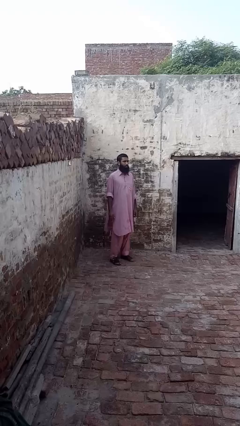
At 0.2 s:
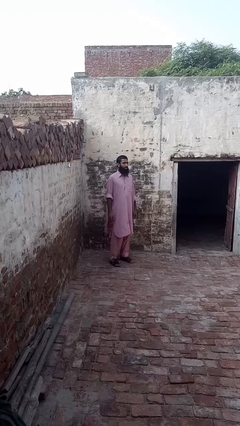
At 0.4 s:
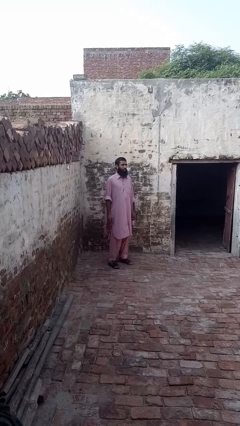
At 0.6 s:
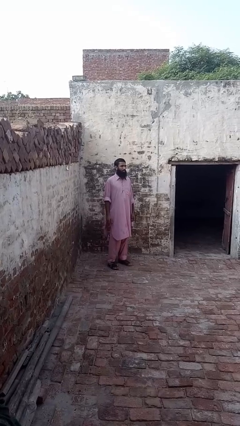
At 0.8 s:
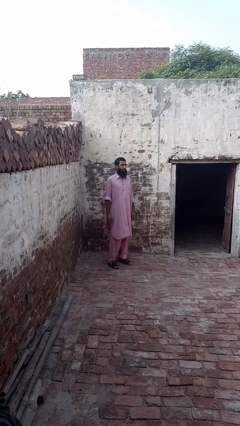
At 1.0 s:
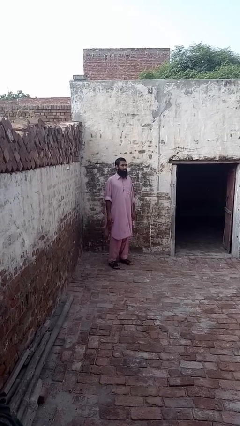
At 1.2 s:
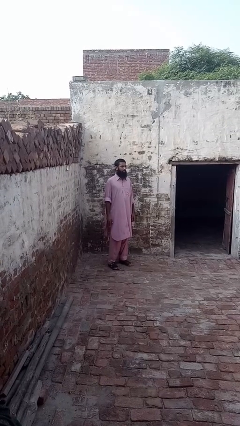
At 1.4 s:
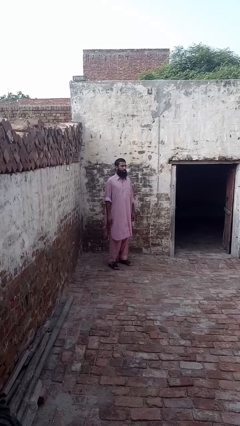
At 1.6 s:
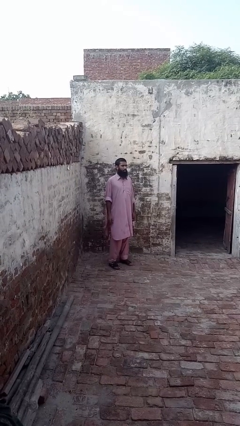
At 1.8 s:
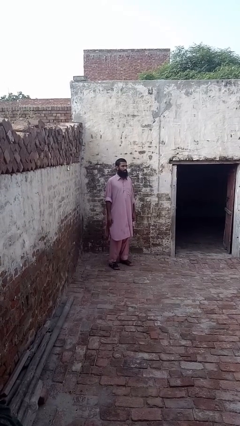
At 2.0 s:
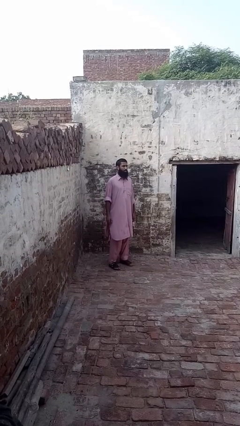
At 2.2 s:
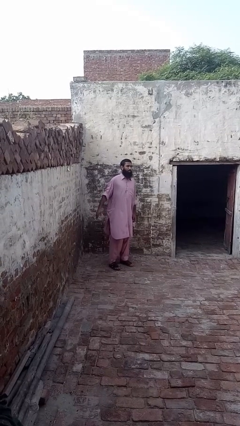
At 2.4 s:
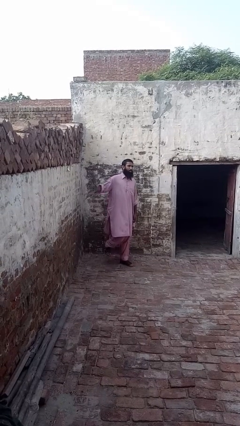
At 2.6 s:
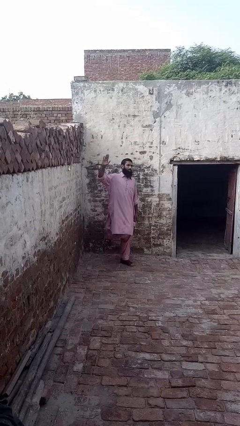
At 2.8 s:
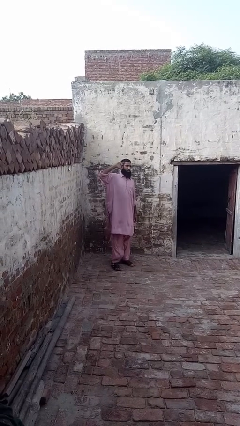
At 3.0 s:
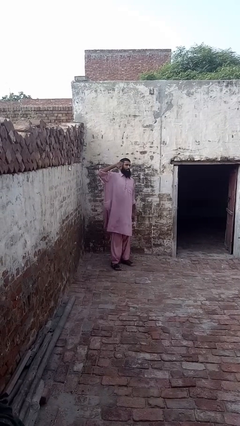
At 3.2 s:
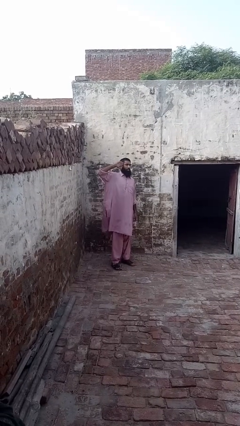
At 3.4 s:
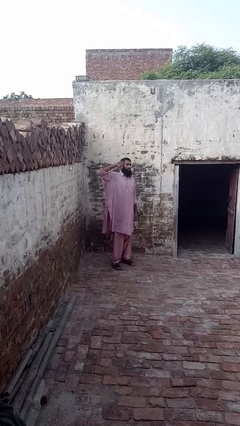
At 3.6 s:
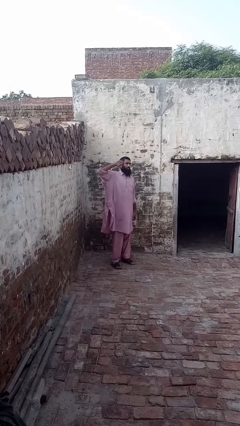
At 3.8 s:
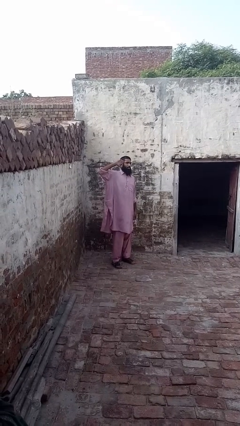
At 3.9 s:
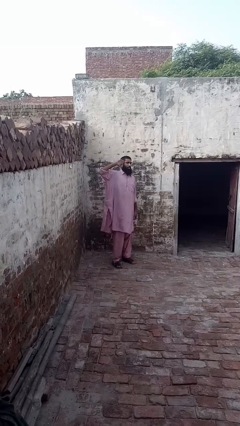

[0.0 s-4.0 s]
person salutes

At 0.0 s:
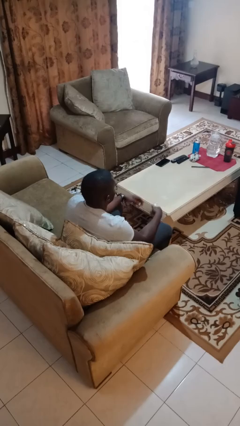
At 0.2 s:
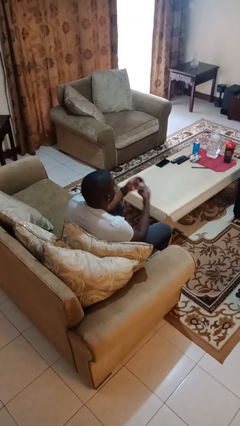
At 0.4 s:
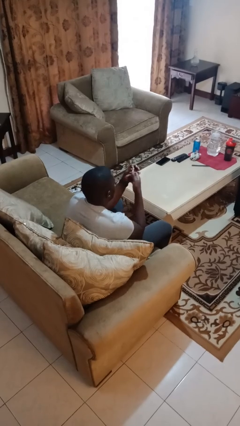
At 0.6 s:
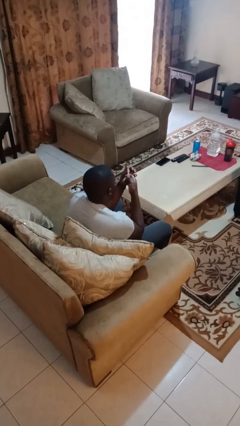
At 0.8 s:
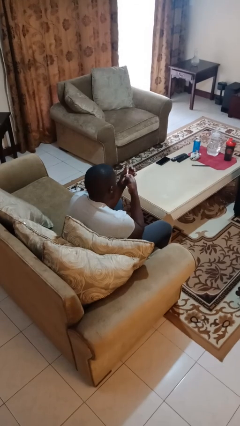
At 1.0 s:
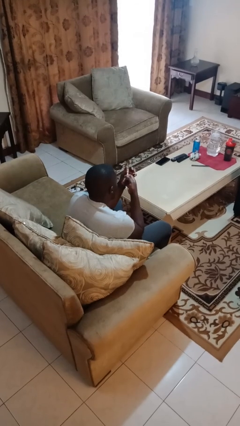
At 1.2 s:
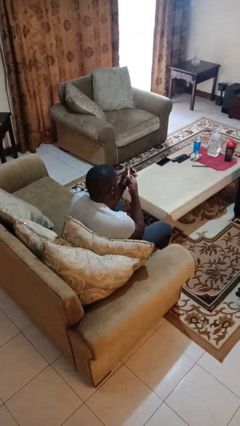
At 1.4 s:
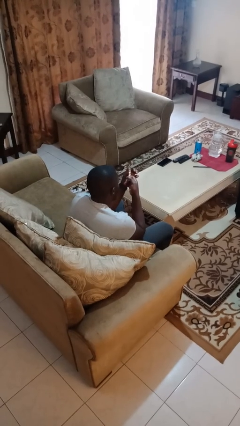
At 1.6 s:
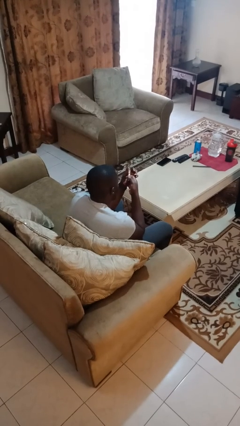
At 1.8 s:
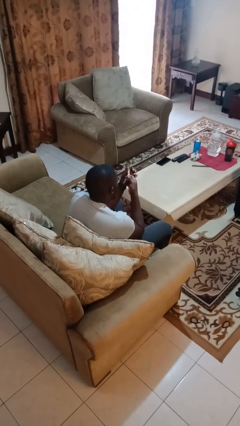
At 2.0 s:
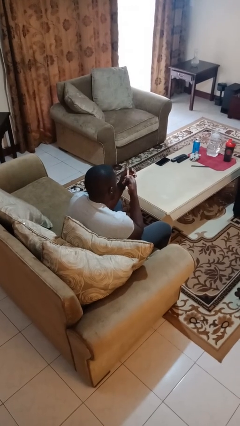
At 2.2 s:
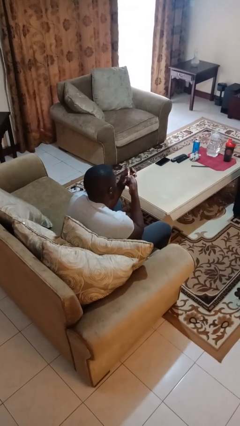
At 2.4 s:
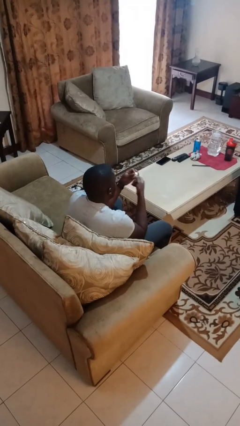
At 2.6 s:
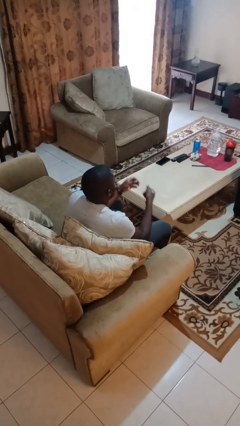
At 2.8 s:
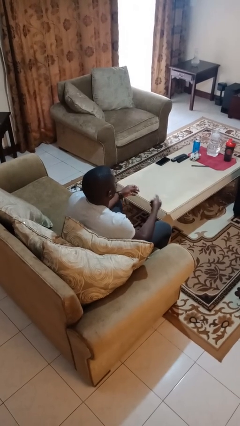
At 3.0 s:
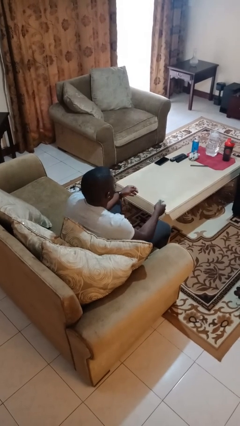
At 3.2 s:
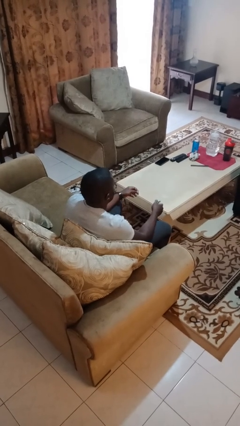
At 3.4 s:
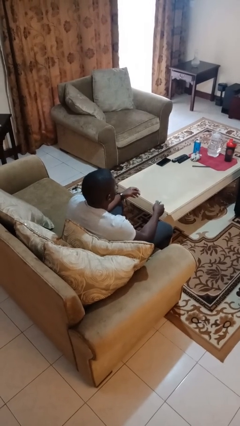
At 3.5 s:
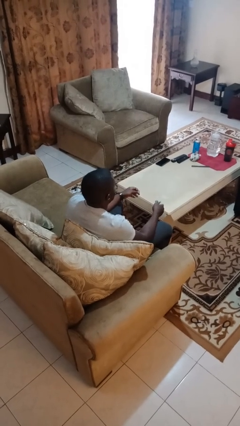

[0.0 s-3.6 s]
person clips fingernails

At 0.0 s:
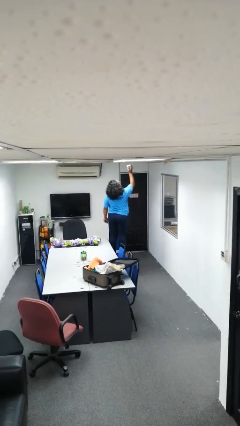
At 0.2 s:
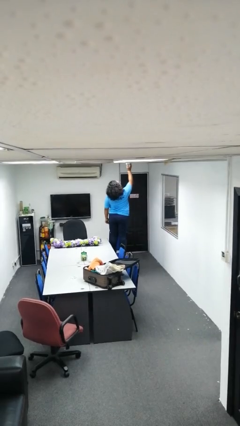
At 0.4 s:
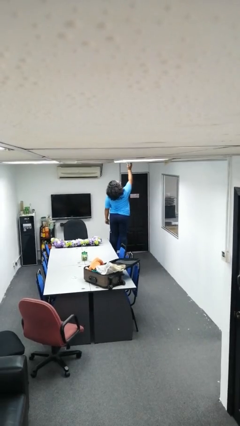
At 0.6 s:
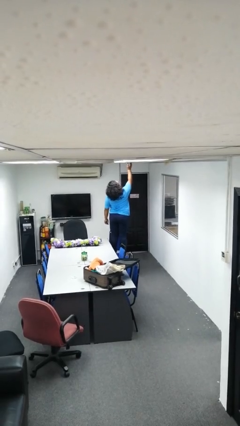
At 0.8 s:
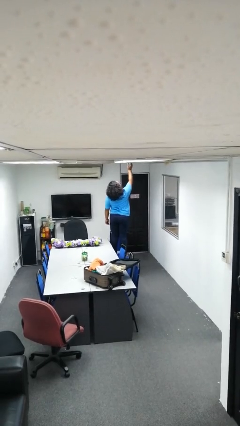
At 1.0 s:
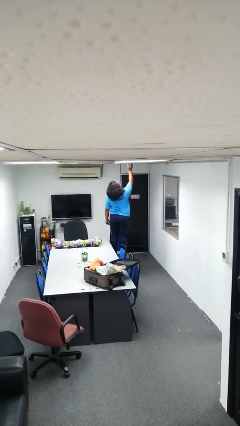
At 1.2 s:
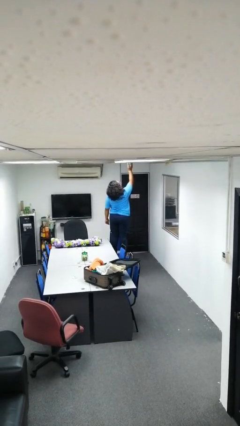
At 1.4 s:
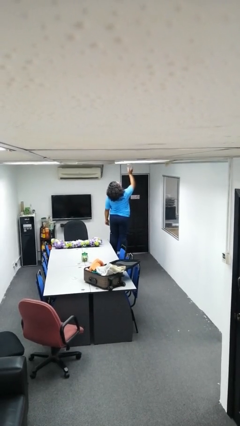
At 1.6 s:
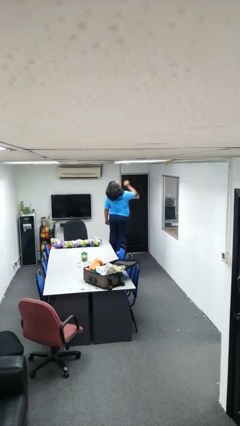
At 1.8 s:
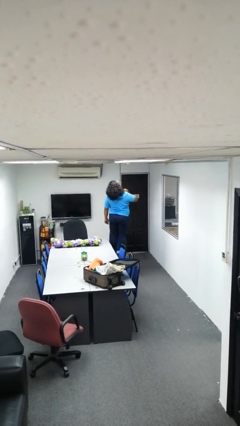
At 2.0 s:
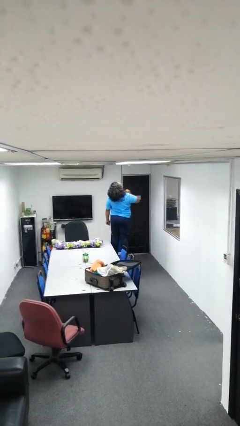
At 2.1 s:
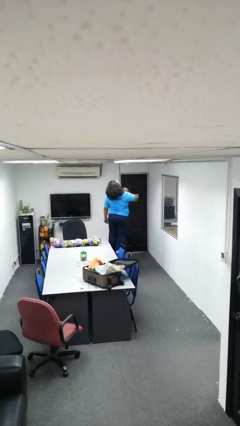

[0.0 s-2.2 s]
person puts up smoke detector

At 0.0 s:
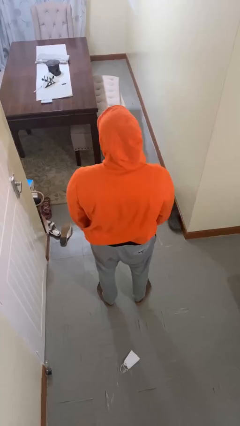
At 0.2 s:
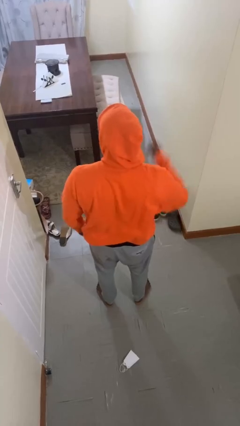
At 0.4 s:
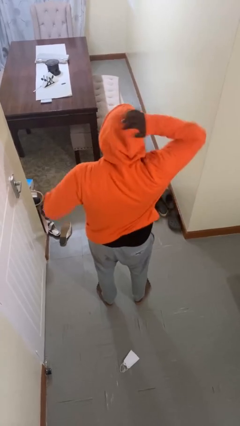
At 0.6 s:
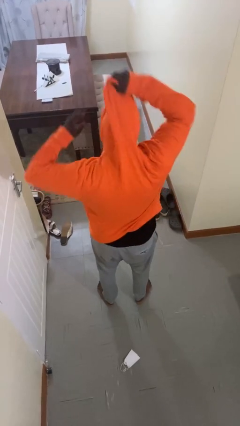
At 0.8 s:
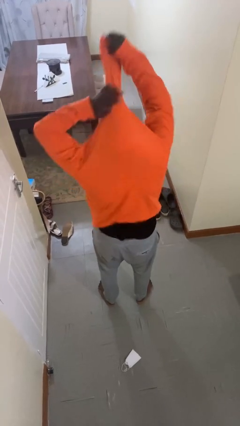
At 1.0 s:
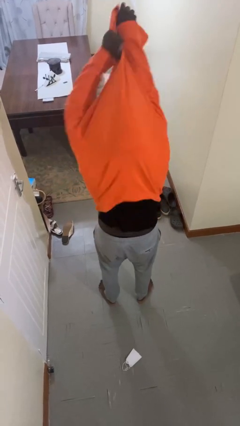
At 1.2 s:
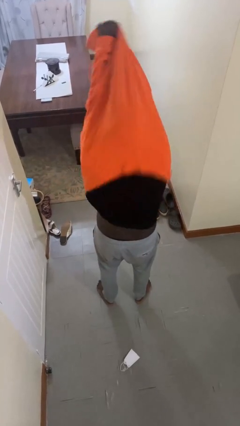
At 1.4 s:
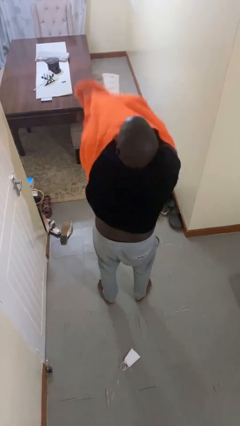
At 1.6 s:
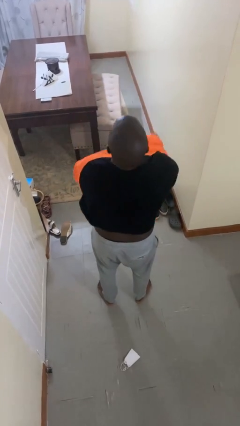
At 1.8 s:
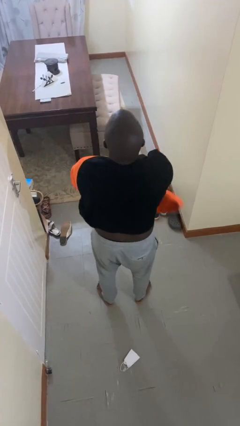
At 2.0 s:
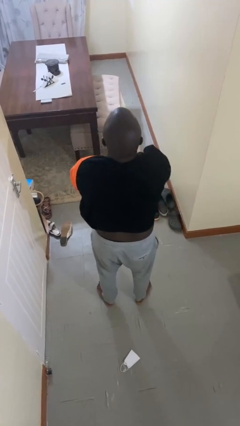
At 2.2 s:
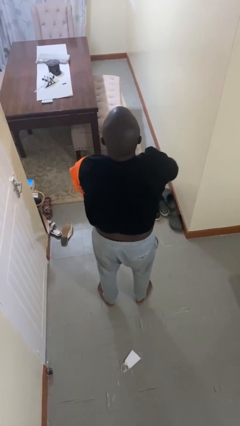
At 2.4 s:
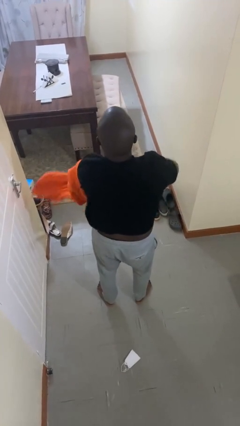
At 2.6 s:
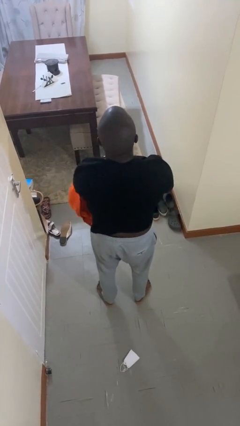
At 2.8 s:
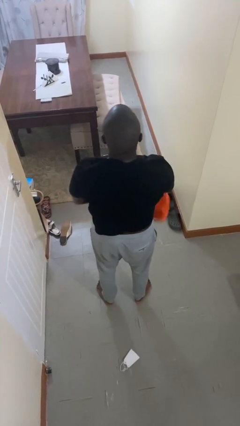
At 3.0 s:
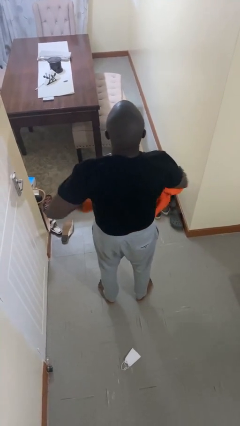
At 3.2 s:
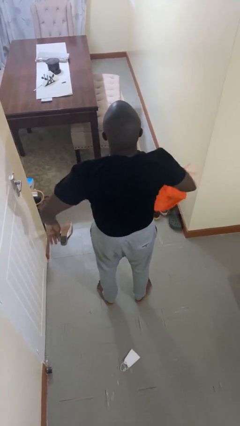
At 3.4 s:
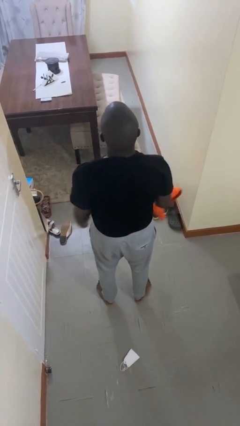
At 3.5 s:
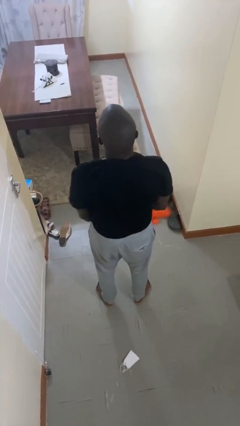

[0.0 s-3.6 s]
person takes off hoodie

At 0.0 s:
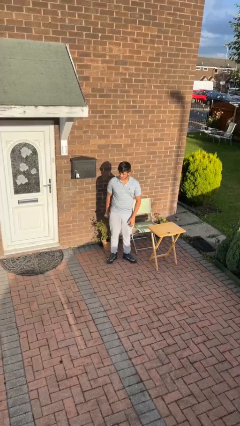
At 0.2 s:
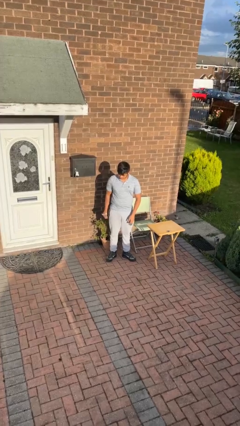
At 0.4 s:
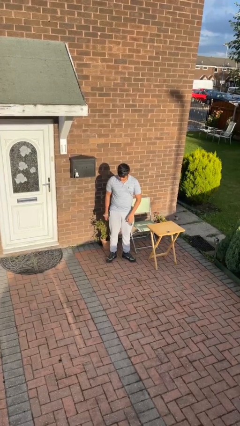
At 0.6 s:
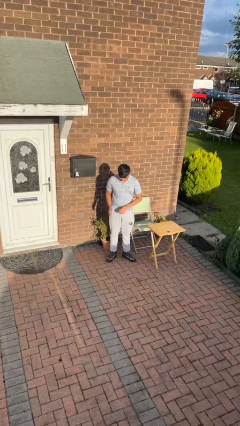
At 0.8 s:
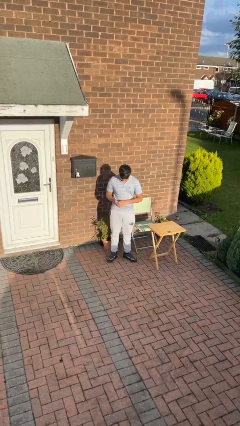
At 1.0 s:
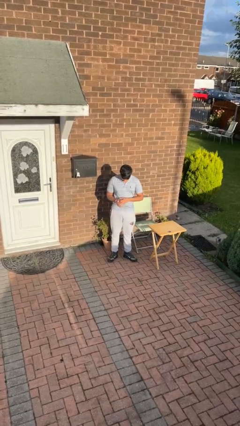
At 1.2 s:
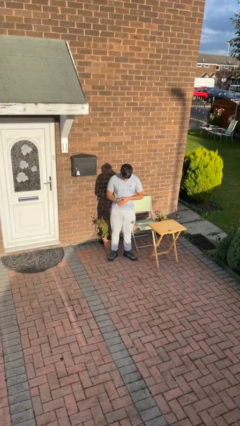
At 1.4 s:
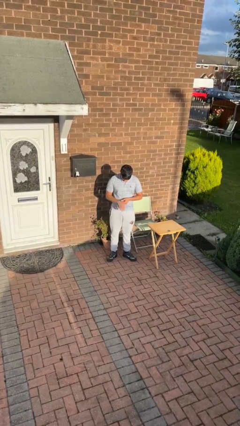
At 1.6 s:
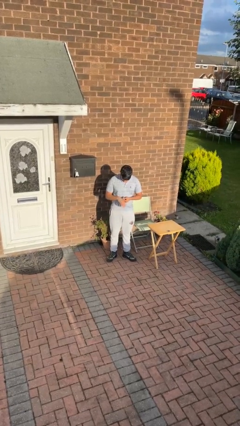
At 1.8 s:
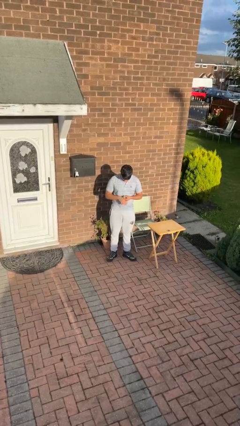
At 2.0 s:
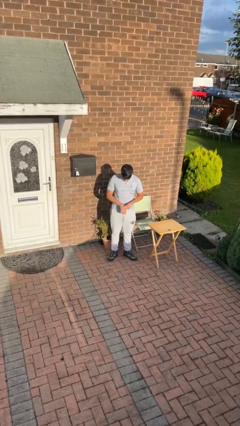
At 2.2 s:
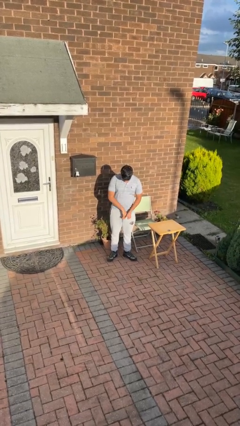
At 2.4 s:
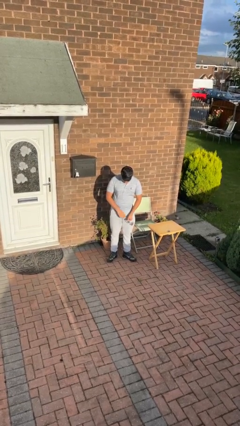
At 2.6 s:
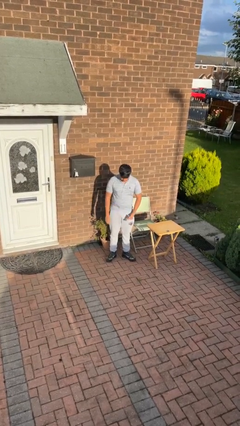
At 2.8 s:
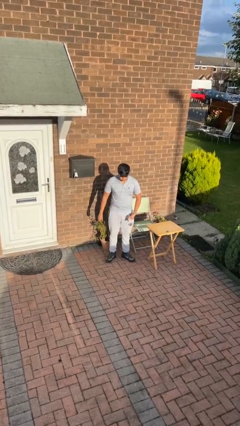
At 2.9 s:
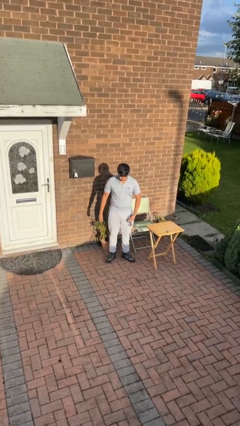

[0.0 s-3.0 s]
person takes off wristwatch

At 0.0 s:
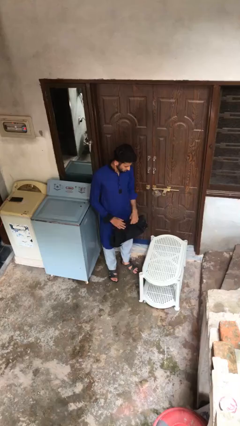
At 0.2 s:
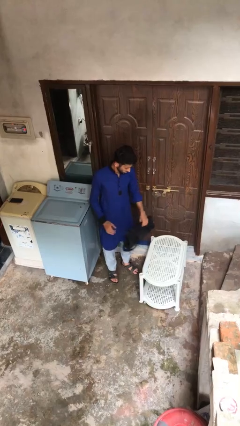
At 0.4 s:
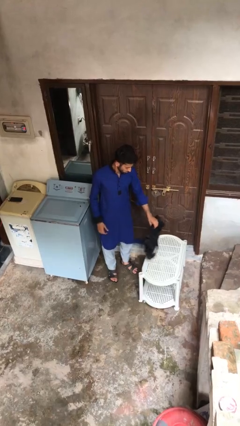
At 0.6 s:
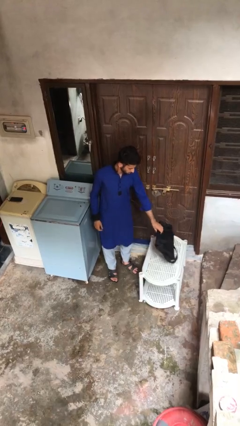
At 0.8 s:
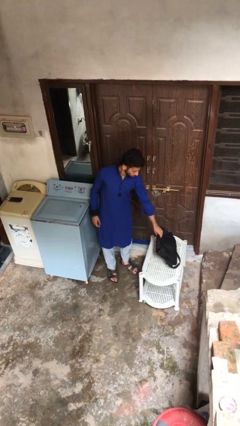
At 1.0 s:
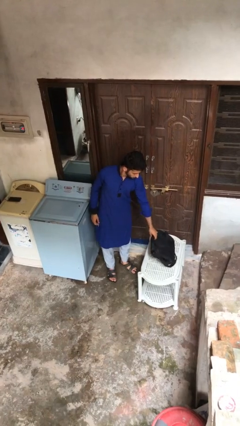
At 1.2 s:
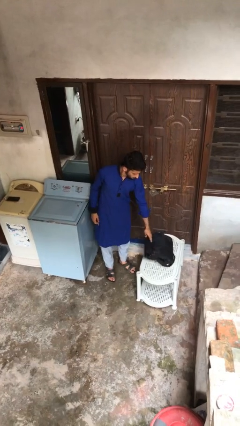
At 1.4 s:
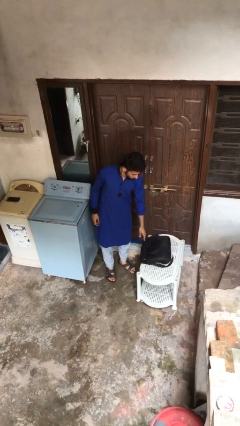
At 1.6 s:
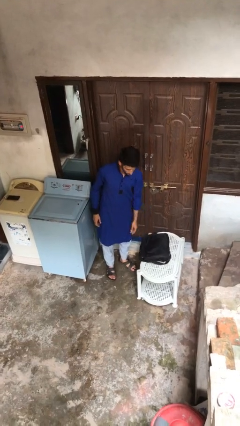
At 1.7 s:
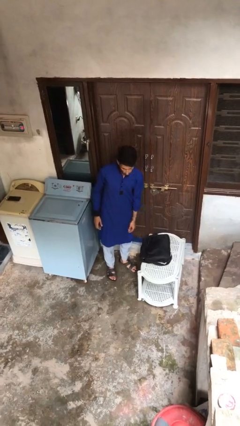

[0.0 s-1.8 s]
person puts down object on table
